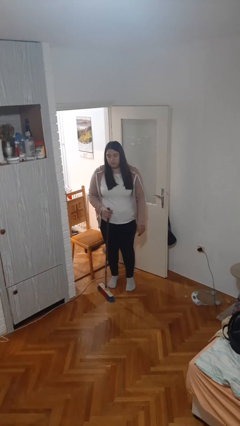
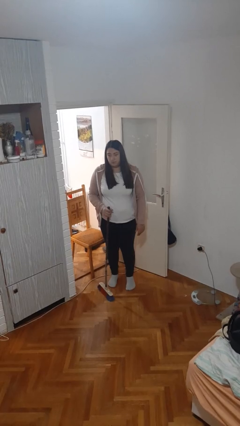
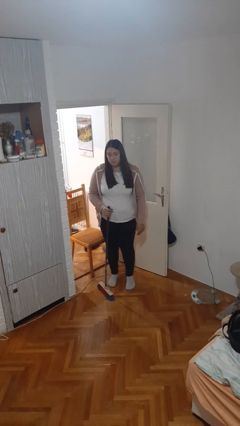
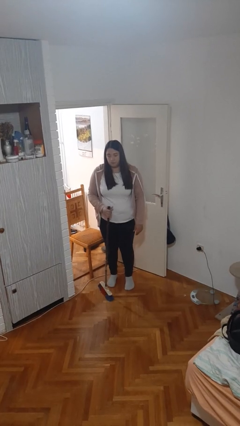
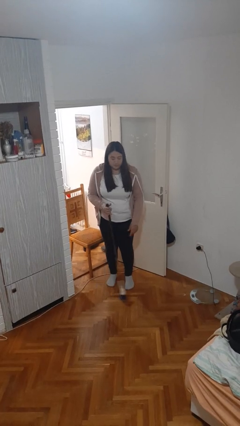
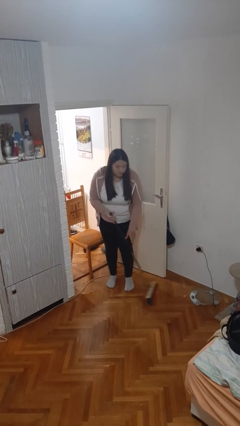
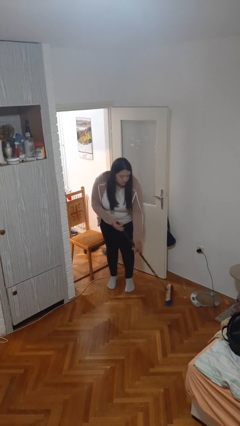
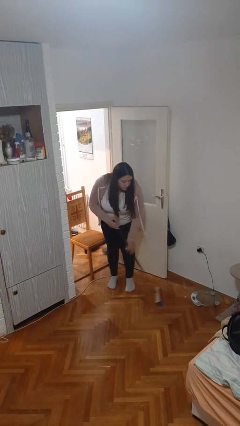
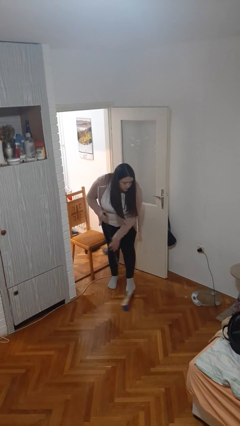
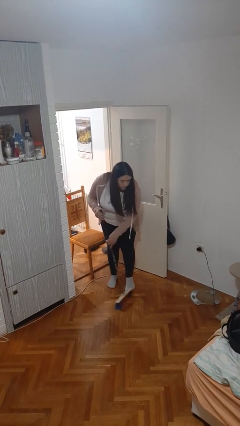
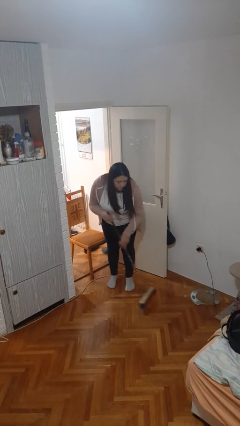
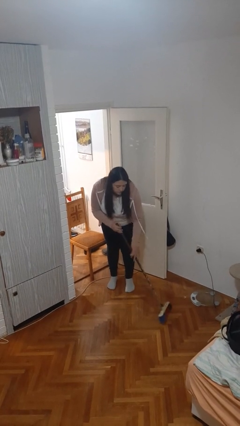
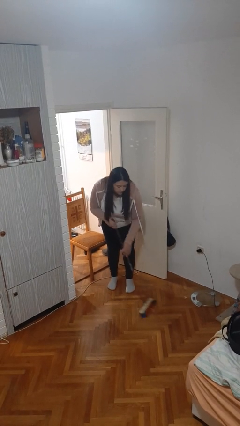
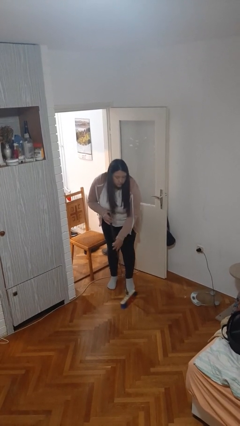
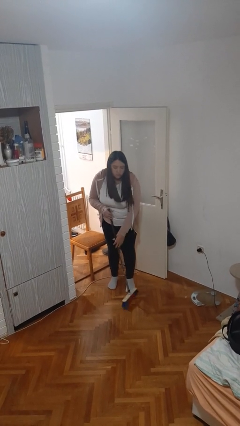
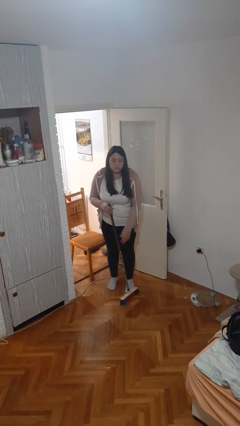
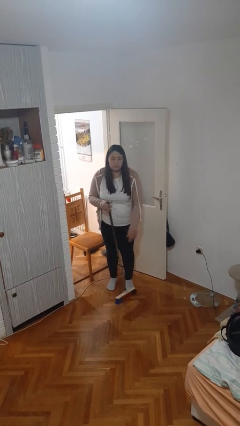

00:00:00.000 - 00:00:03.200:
person sweeps floor

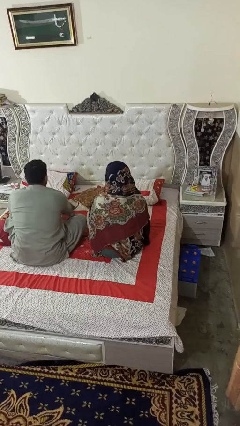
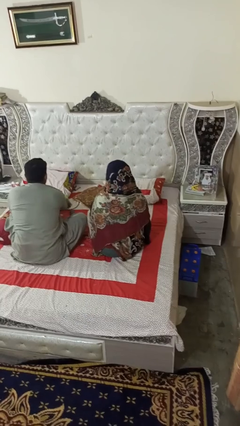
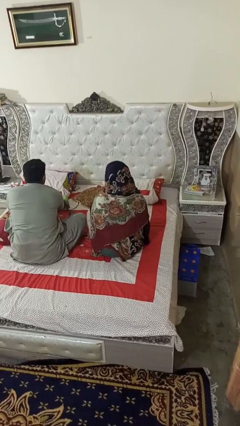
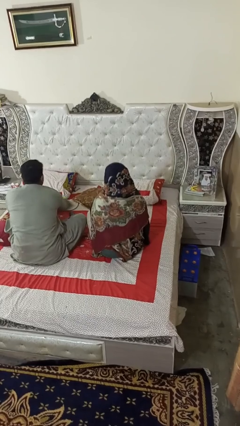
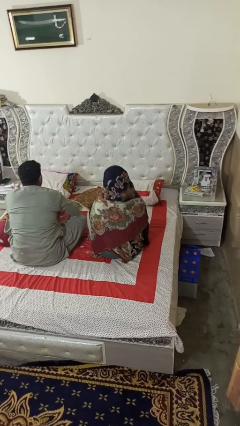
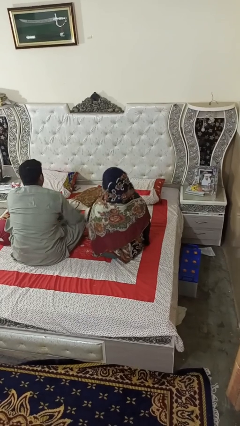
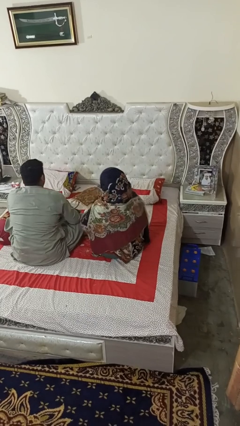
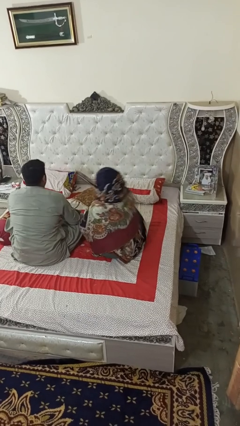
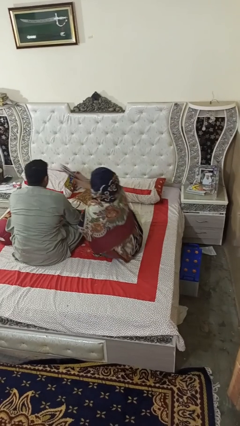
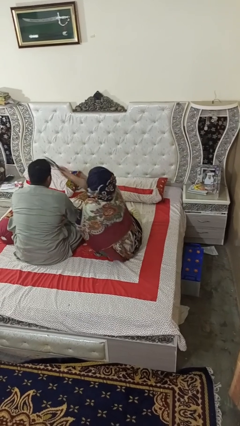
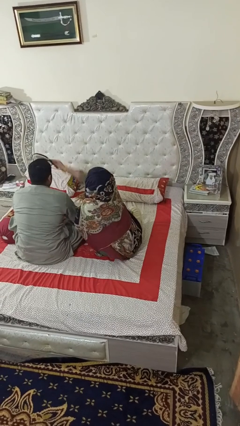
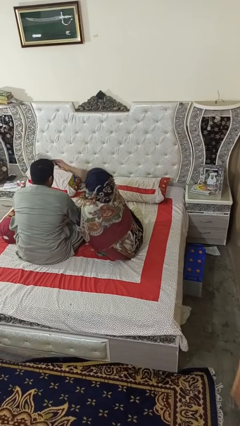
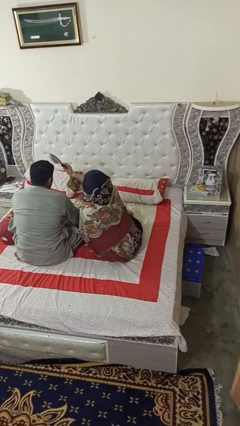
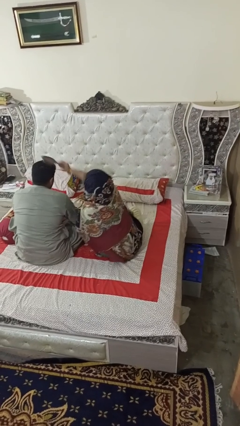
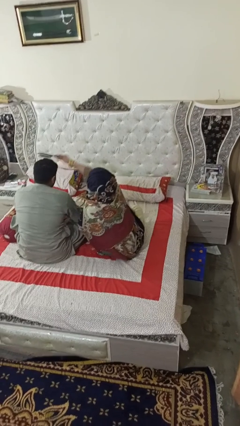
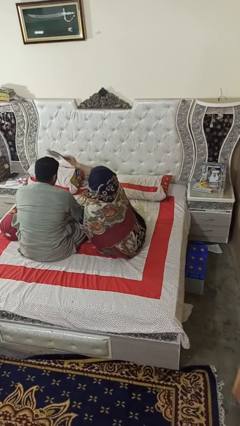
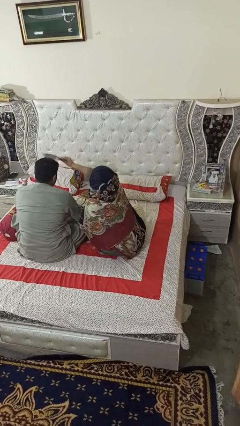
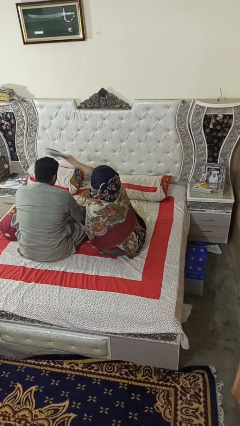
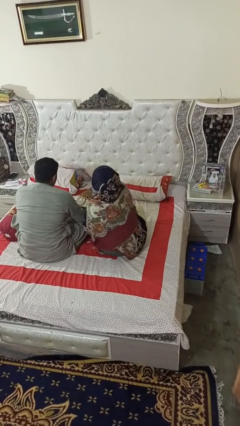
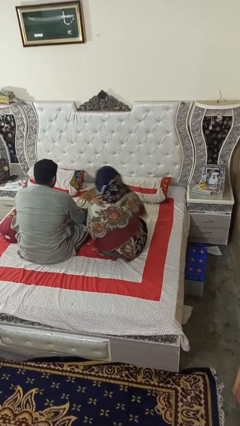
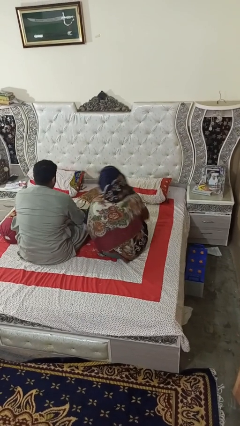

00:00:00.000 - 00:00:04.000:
person brushes hair of person

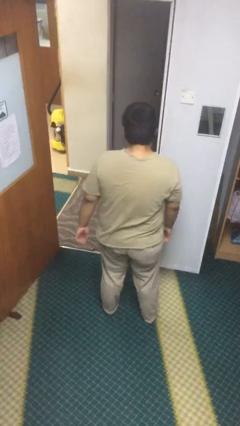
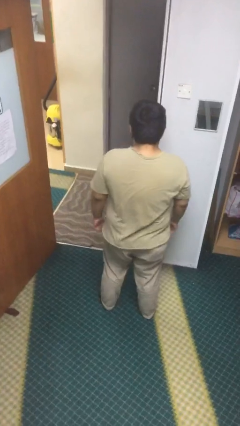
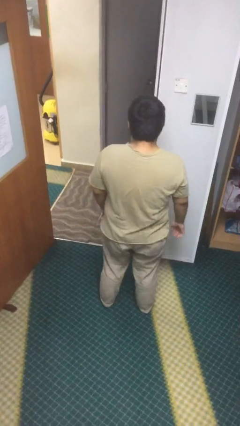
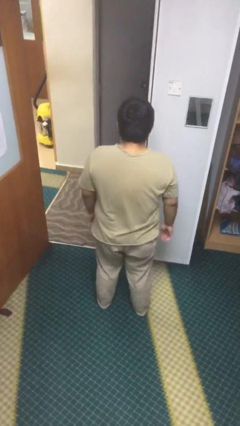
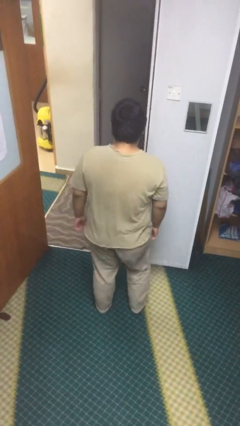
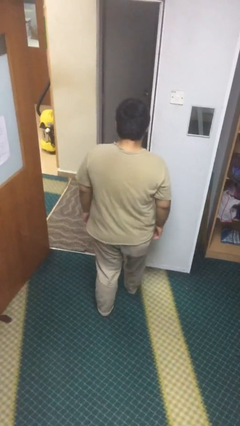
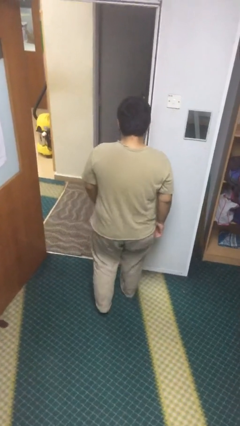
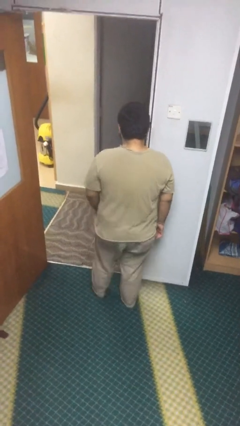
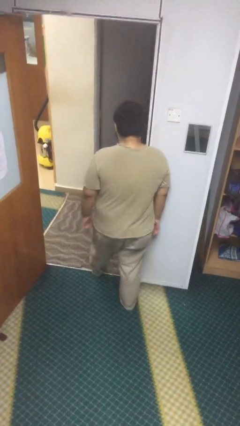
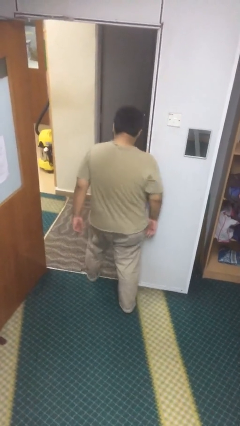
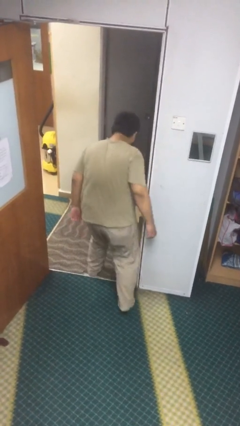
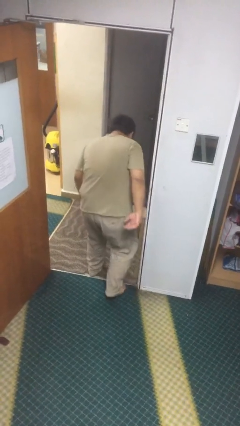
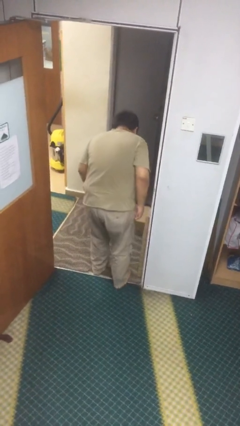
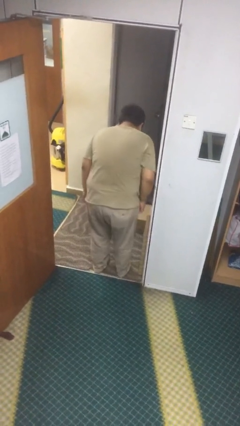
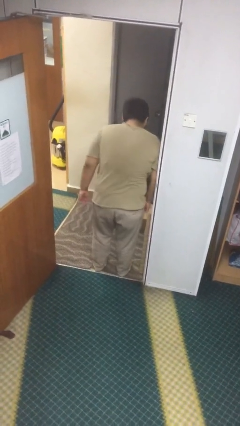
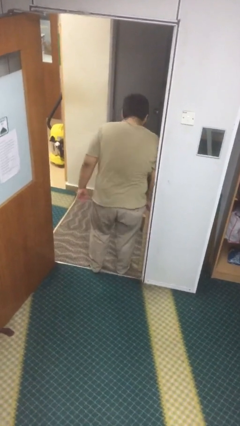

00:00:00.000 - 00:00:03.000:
person bumps into wall

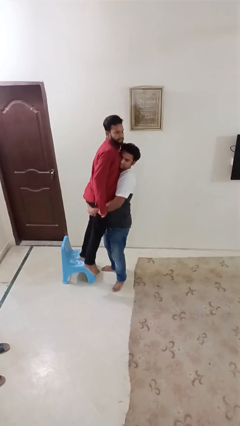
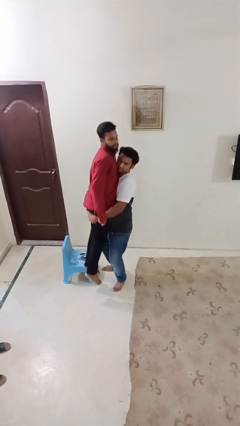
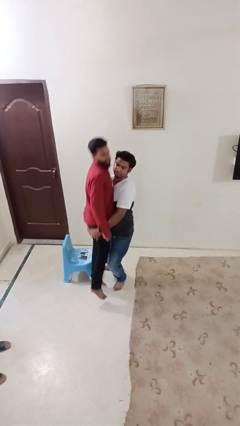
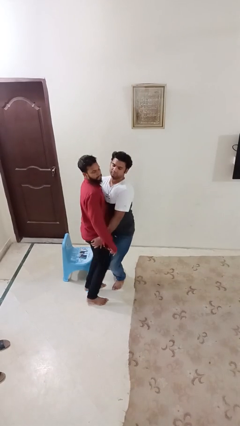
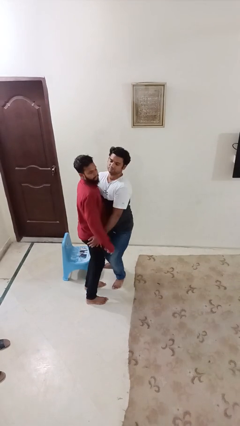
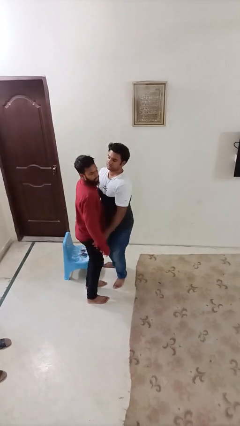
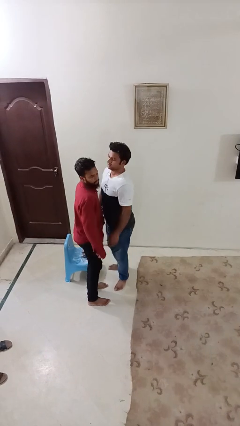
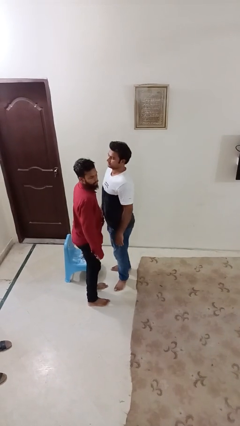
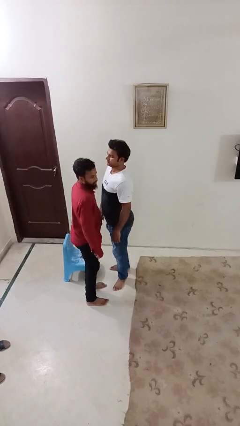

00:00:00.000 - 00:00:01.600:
person puts down person

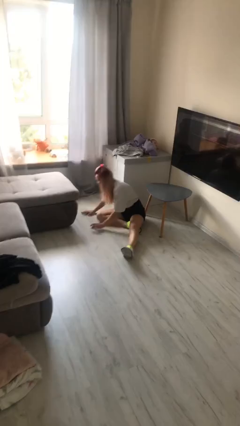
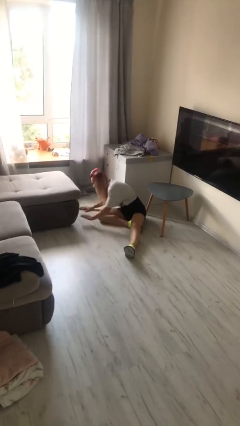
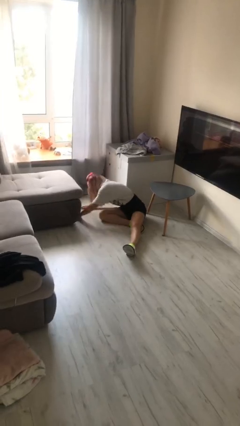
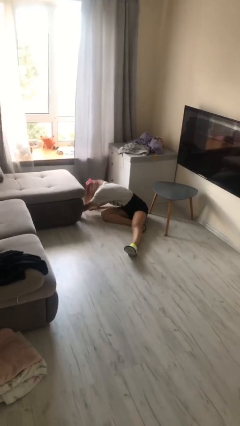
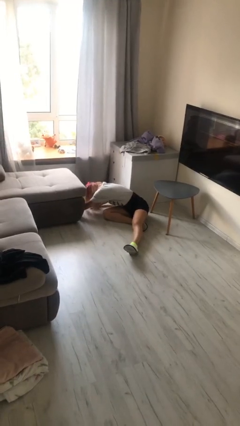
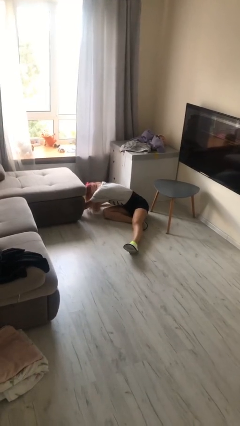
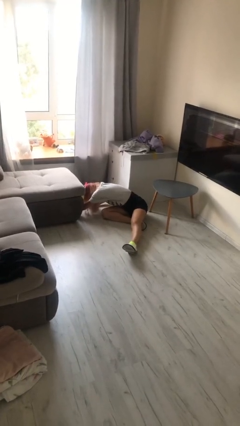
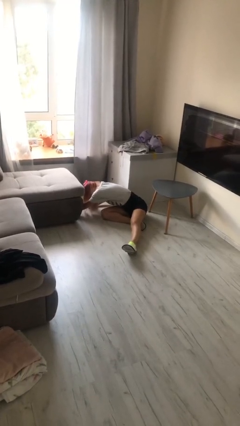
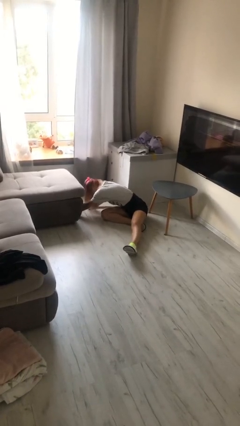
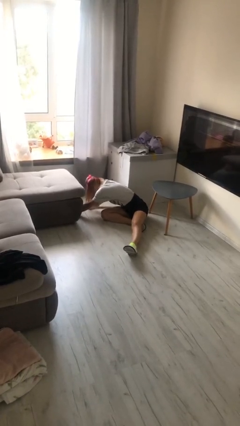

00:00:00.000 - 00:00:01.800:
person searches under couch

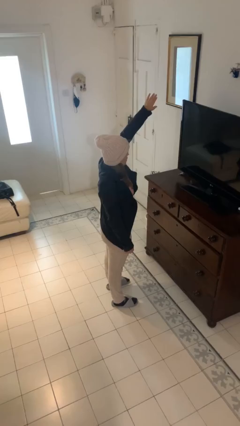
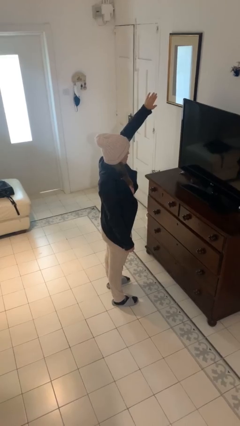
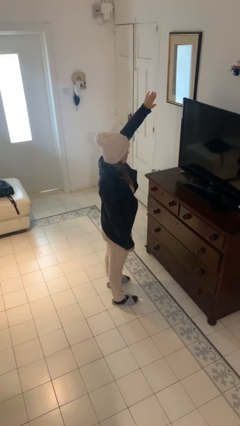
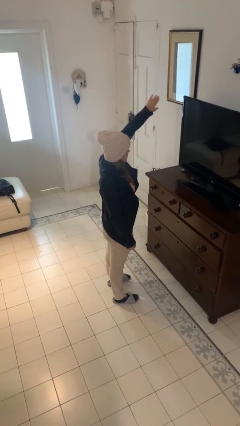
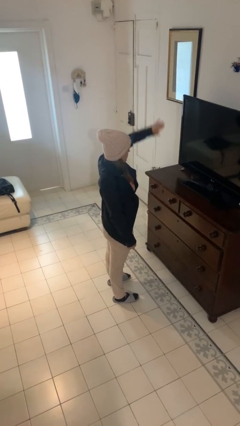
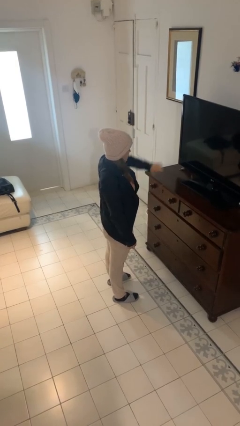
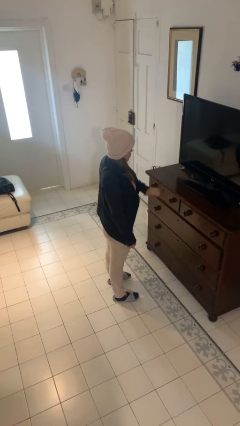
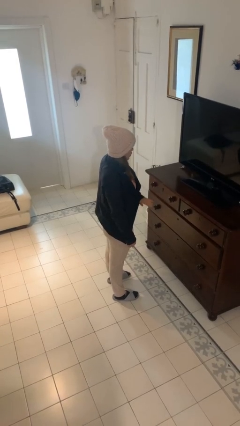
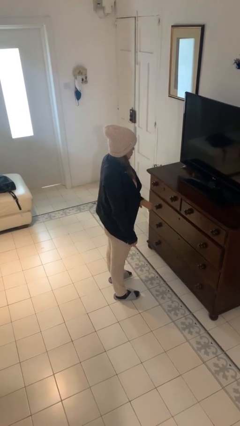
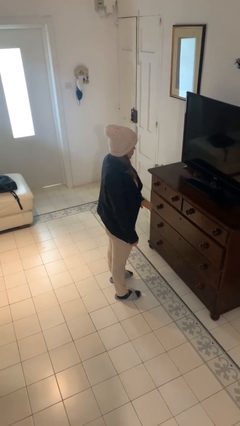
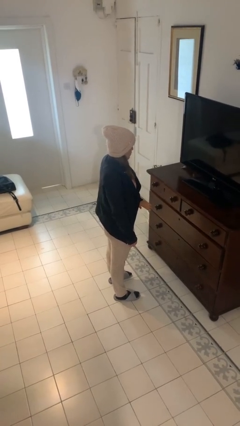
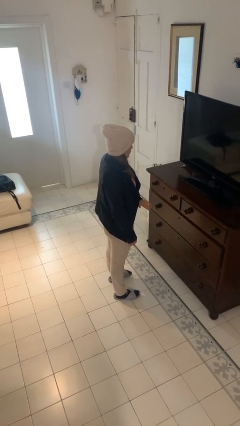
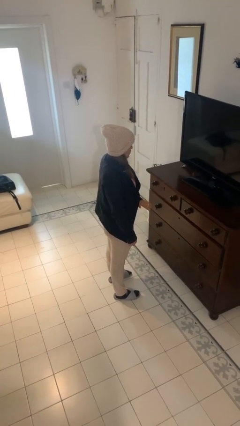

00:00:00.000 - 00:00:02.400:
person gestures swipe down

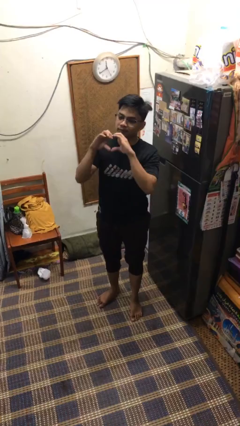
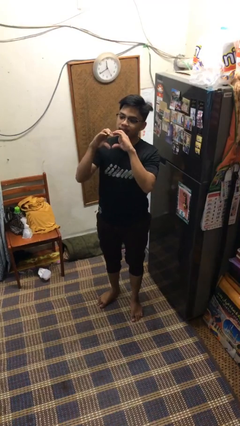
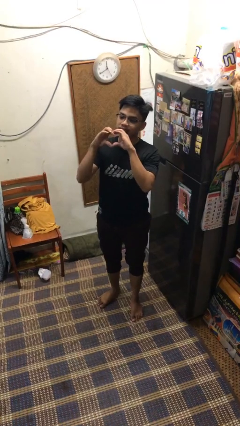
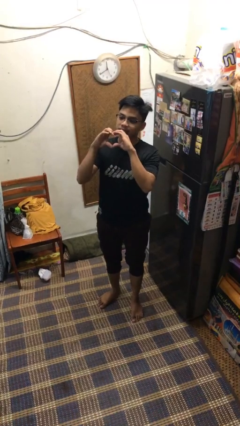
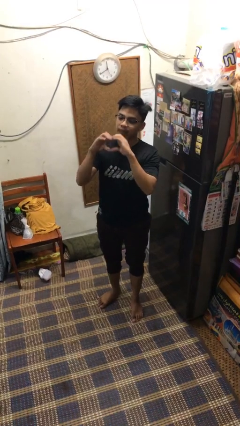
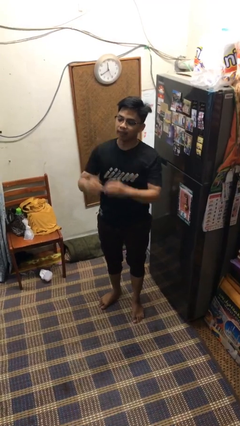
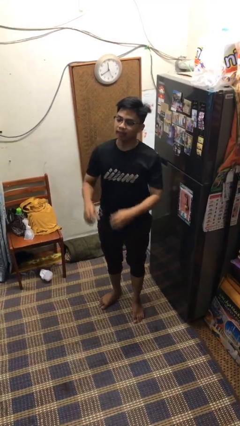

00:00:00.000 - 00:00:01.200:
person gestures heart
